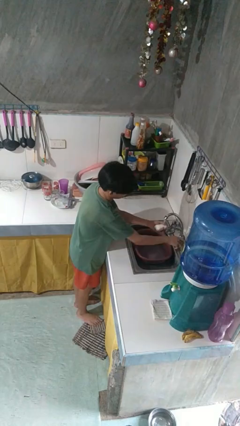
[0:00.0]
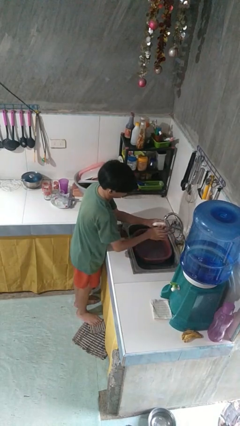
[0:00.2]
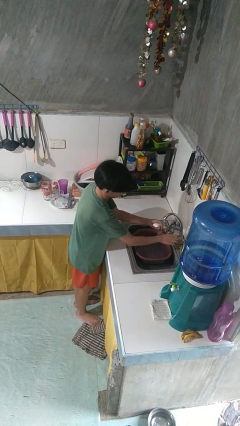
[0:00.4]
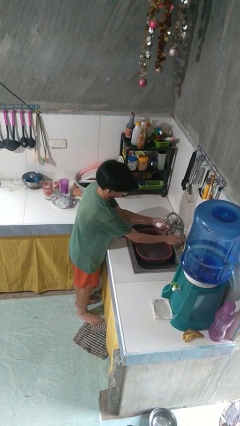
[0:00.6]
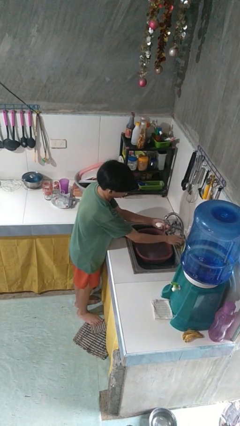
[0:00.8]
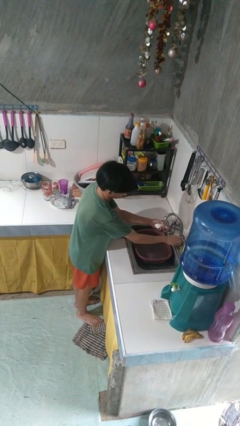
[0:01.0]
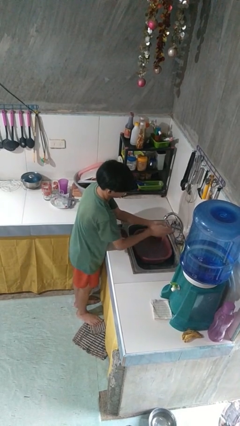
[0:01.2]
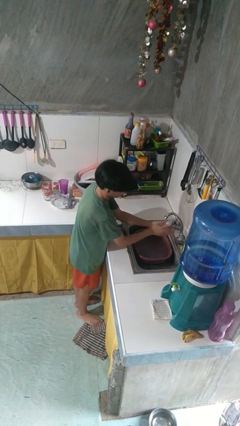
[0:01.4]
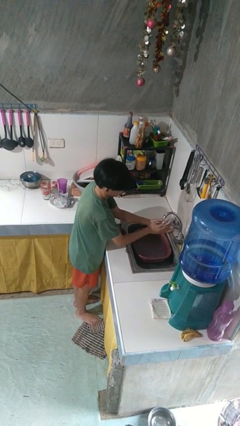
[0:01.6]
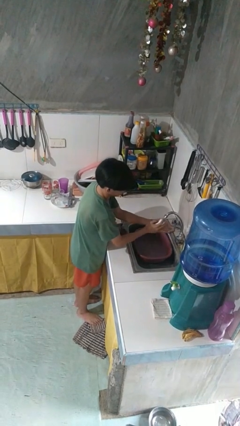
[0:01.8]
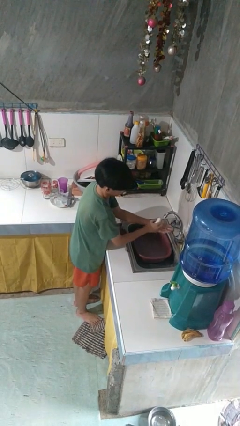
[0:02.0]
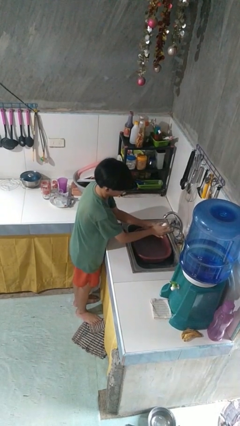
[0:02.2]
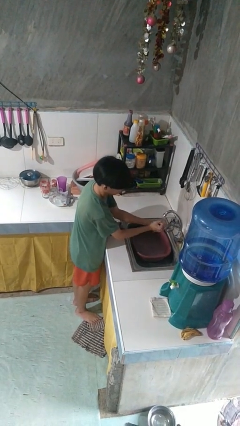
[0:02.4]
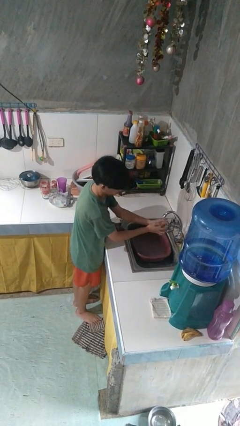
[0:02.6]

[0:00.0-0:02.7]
person washes hands

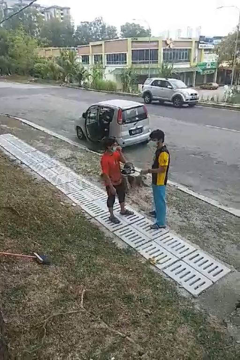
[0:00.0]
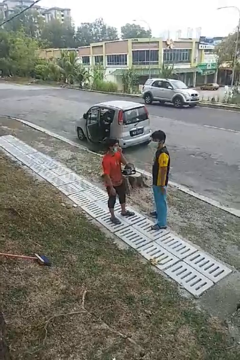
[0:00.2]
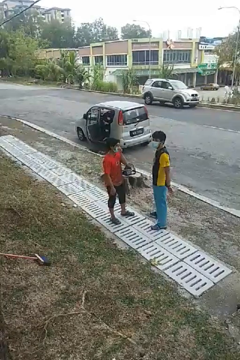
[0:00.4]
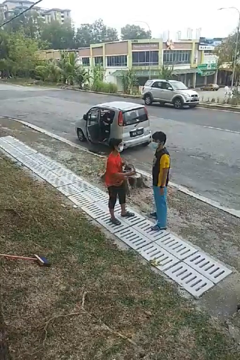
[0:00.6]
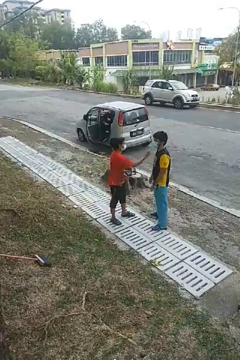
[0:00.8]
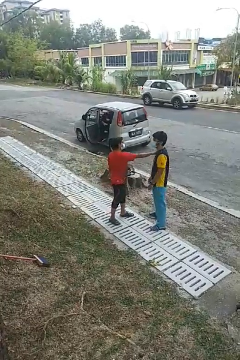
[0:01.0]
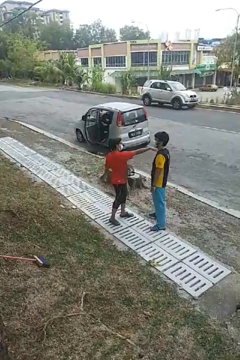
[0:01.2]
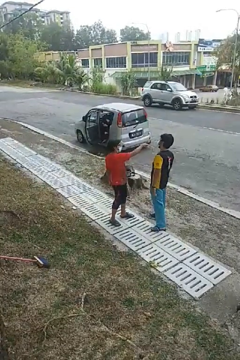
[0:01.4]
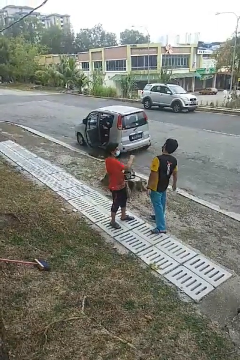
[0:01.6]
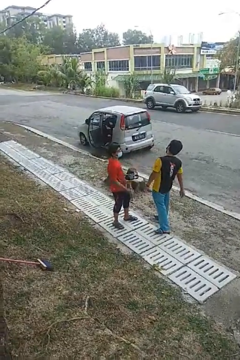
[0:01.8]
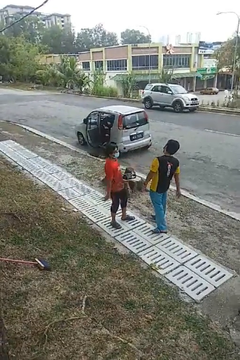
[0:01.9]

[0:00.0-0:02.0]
person shoves person

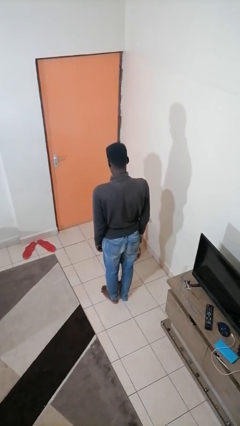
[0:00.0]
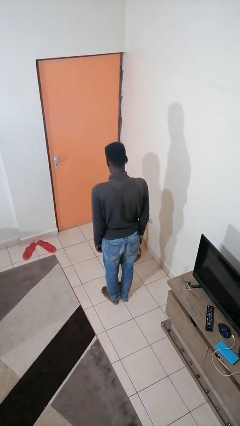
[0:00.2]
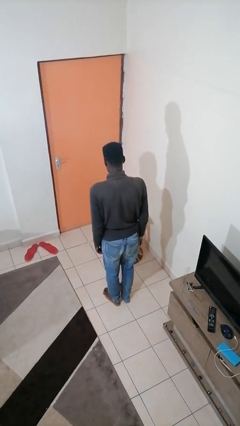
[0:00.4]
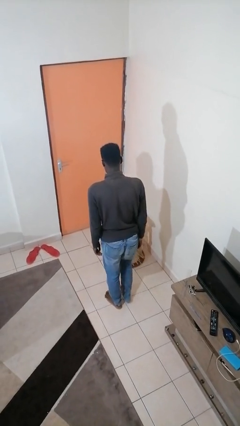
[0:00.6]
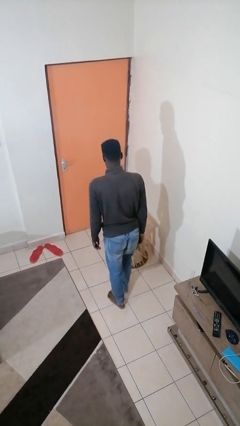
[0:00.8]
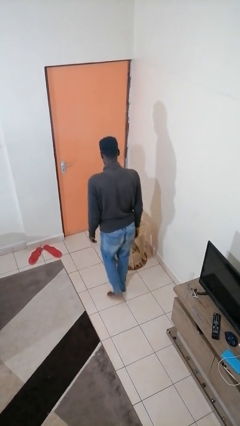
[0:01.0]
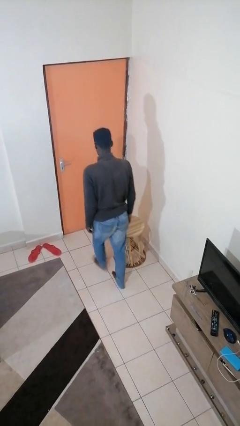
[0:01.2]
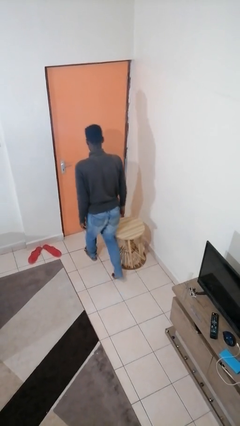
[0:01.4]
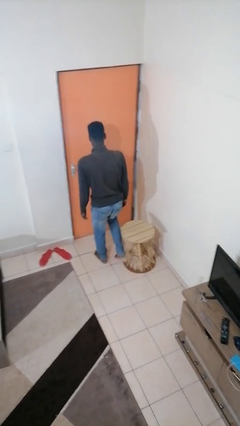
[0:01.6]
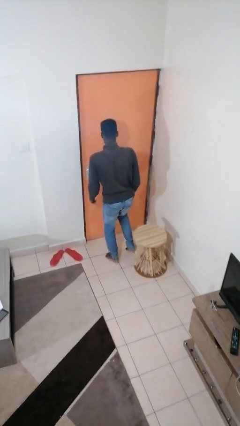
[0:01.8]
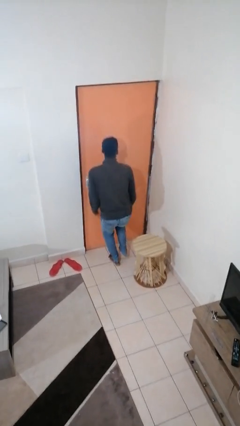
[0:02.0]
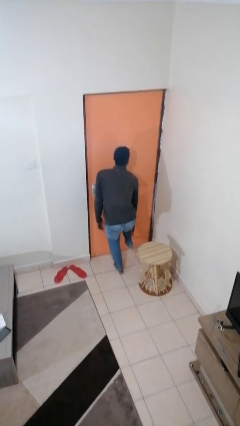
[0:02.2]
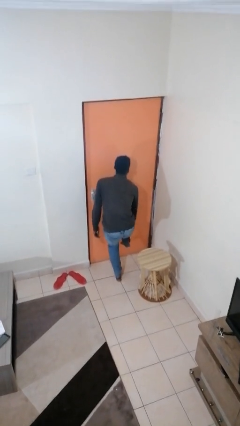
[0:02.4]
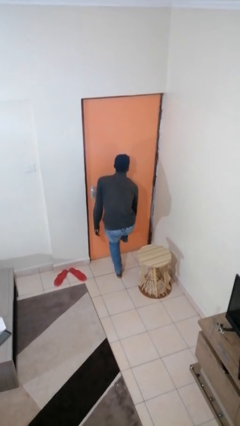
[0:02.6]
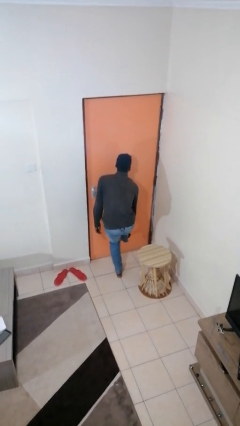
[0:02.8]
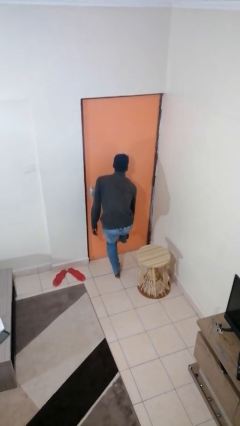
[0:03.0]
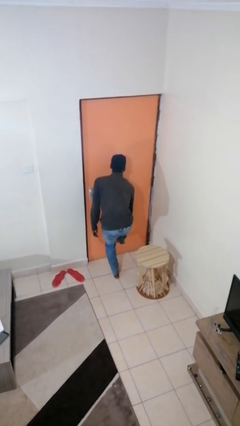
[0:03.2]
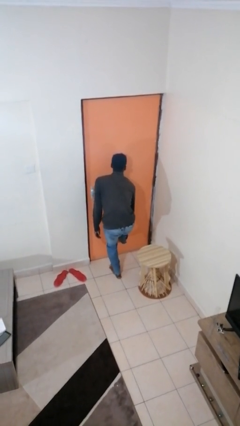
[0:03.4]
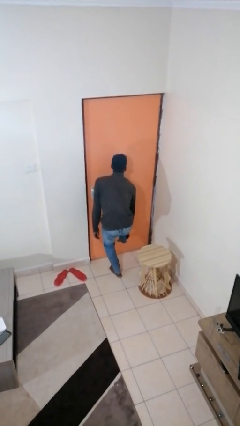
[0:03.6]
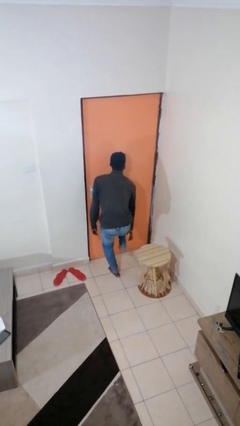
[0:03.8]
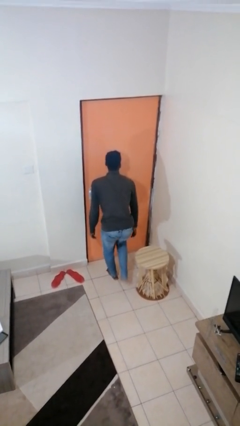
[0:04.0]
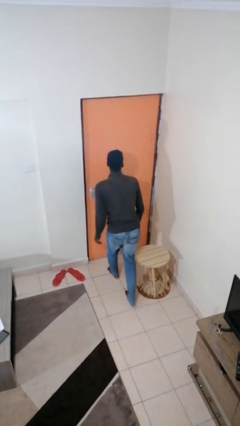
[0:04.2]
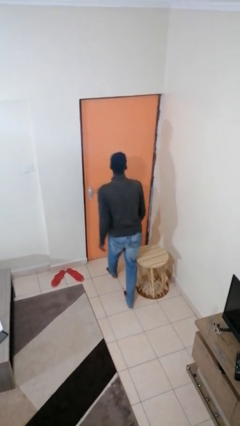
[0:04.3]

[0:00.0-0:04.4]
person stubs toe

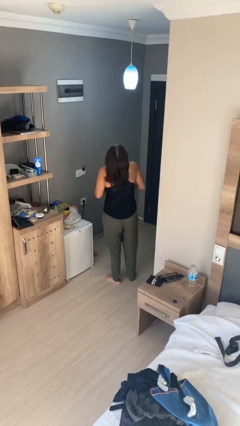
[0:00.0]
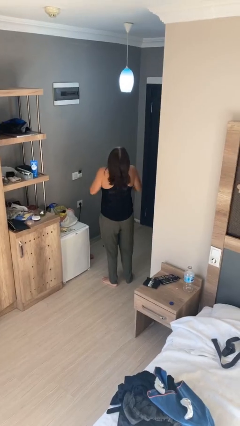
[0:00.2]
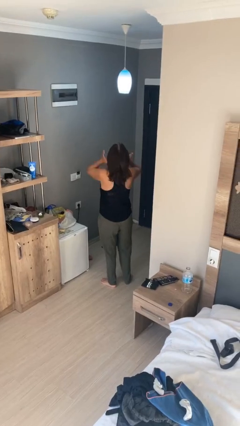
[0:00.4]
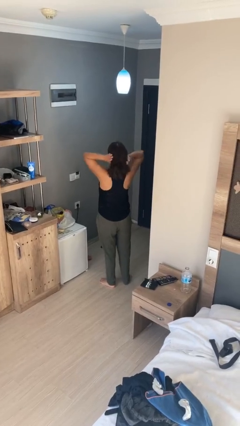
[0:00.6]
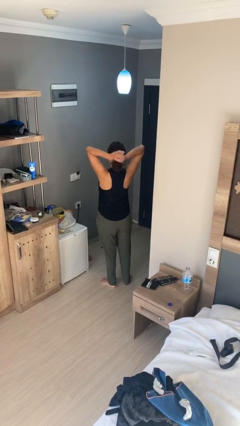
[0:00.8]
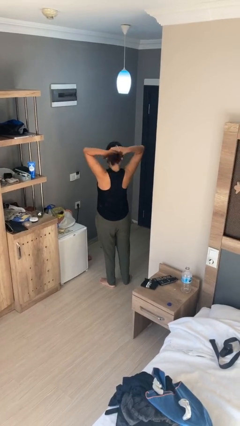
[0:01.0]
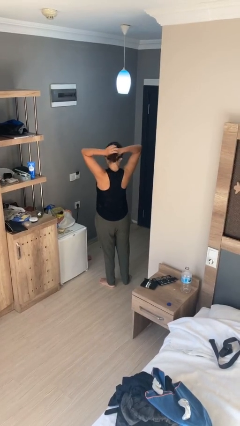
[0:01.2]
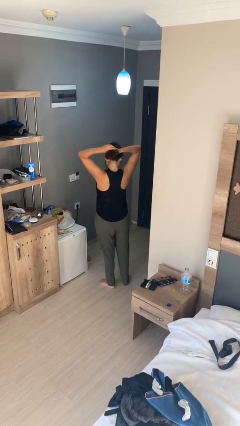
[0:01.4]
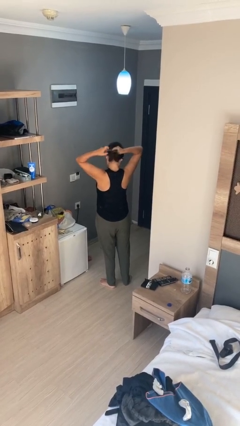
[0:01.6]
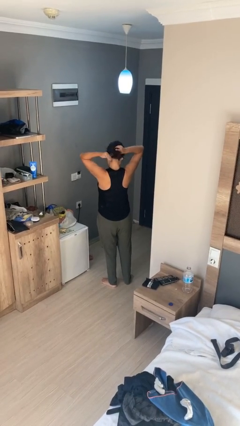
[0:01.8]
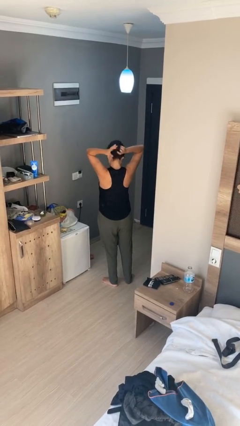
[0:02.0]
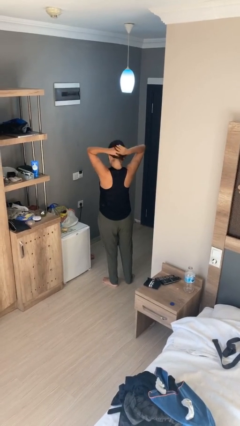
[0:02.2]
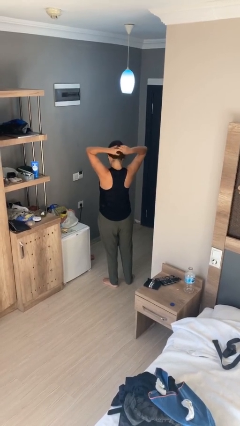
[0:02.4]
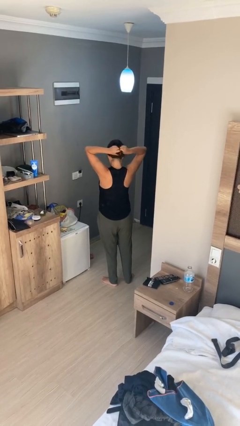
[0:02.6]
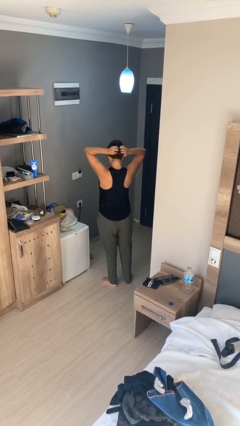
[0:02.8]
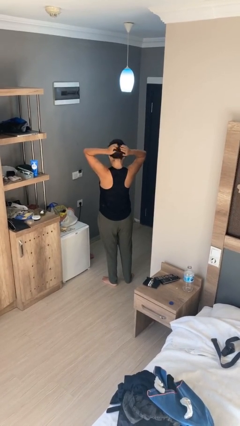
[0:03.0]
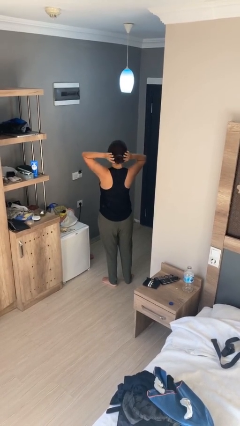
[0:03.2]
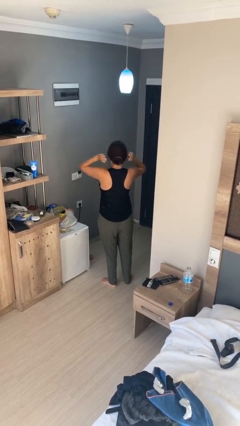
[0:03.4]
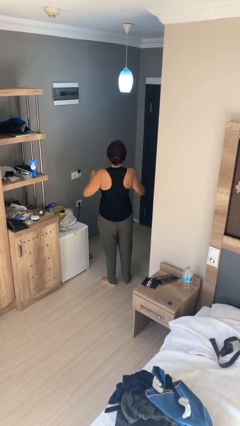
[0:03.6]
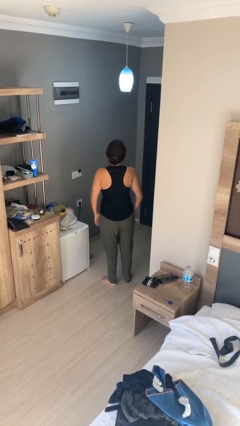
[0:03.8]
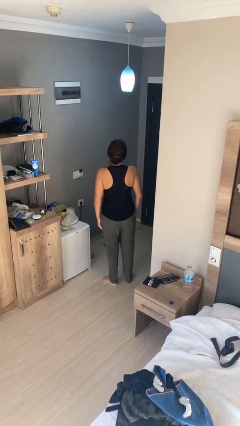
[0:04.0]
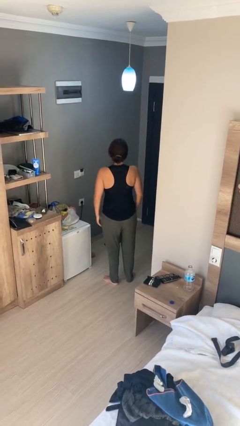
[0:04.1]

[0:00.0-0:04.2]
person puts hair in ponytail

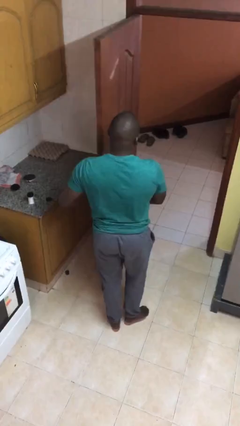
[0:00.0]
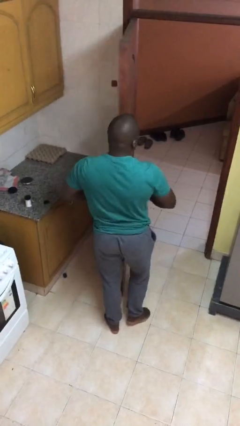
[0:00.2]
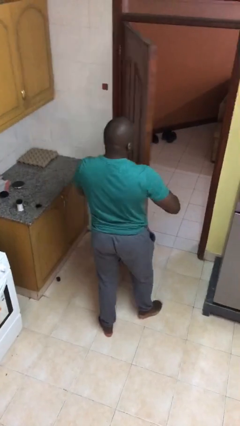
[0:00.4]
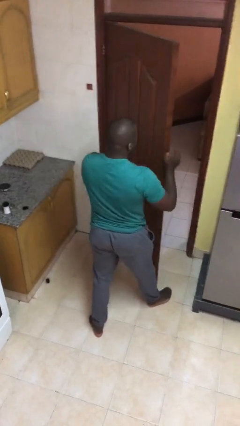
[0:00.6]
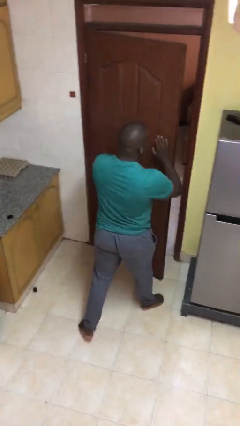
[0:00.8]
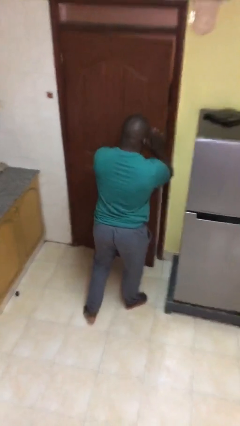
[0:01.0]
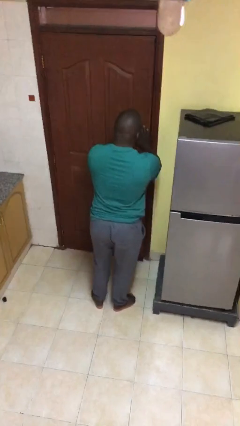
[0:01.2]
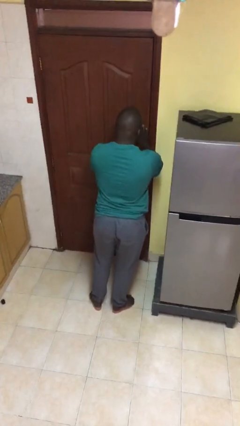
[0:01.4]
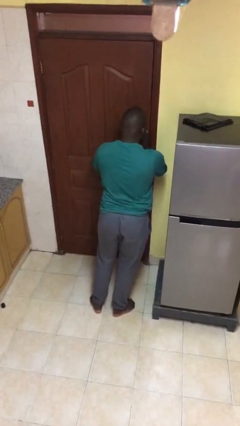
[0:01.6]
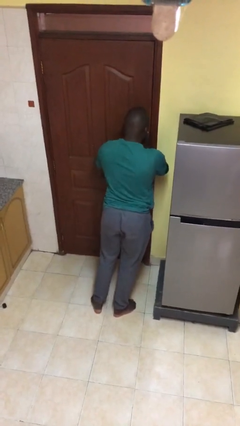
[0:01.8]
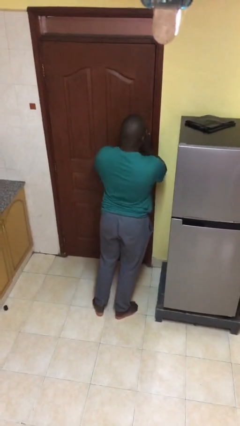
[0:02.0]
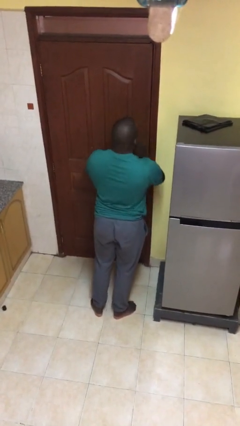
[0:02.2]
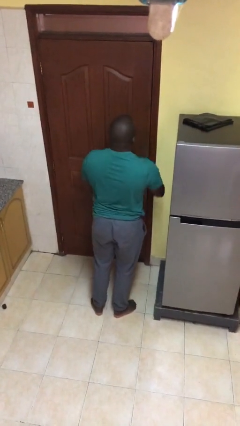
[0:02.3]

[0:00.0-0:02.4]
person closes facility door

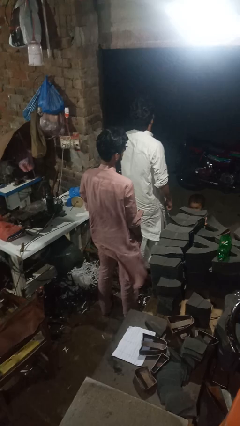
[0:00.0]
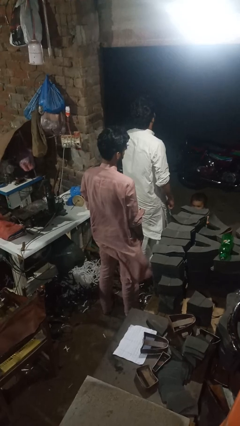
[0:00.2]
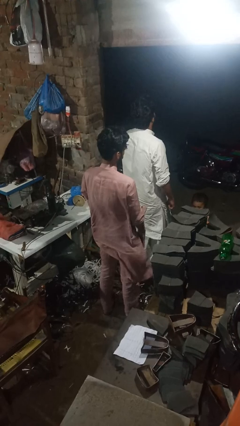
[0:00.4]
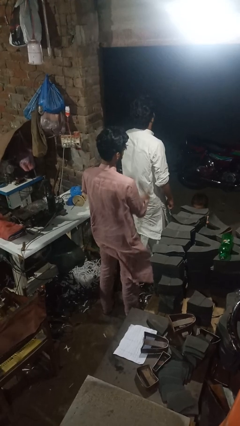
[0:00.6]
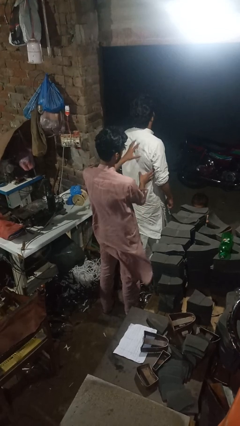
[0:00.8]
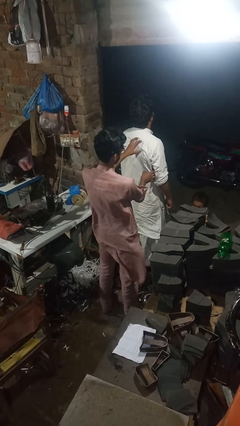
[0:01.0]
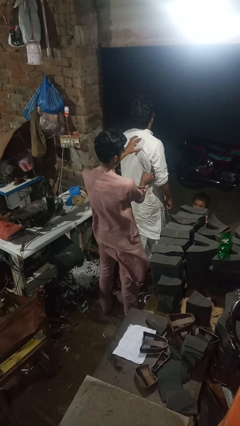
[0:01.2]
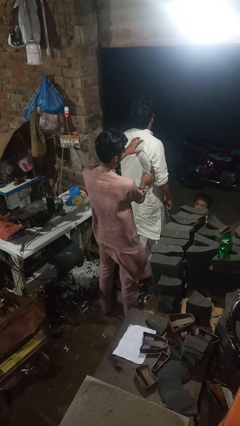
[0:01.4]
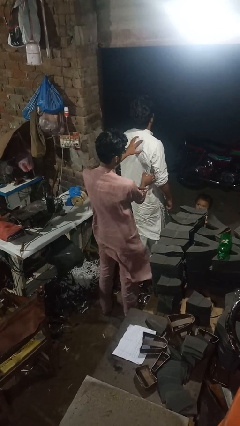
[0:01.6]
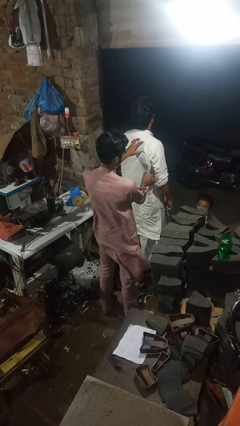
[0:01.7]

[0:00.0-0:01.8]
person tickles person

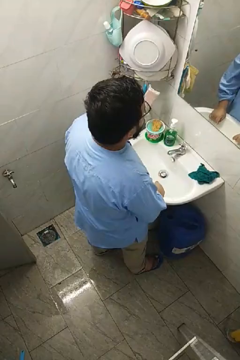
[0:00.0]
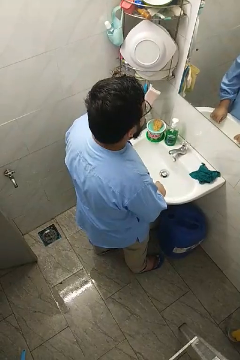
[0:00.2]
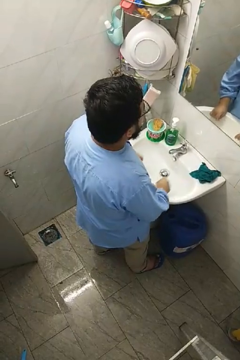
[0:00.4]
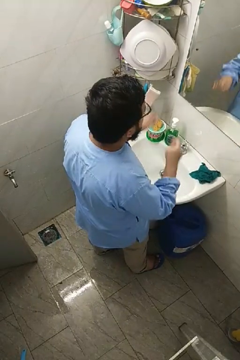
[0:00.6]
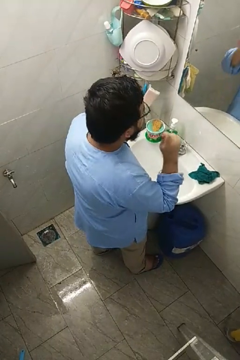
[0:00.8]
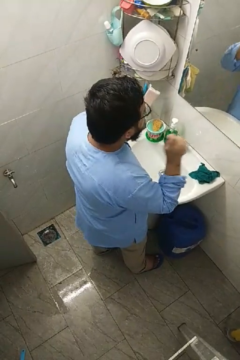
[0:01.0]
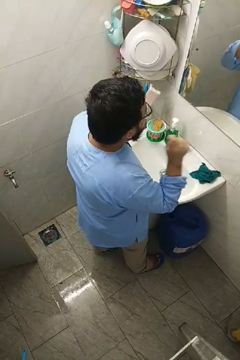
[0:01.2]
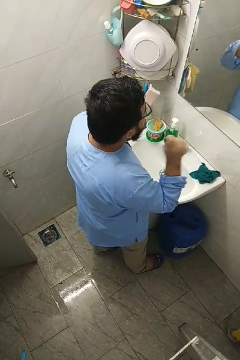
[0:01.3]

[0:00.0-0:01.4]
person flosses
